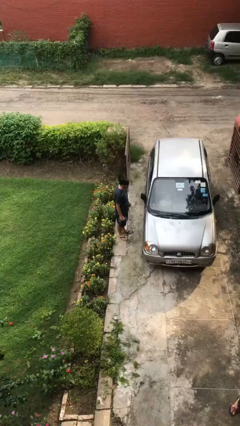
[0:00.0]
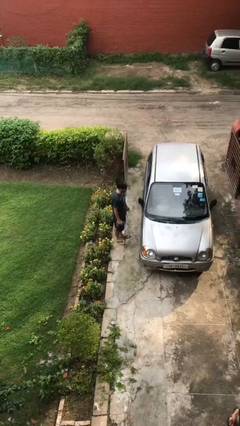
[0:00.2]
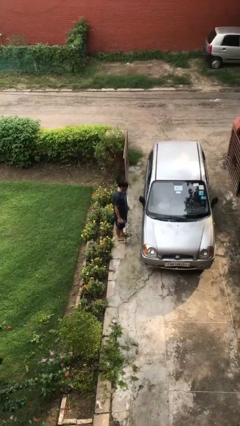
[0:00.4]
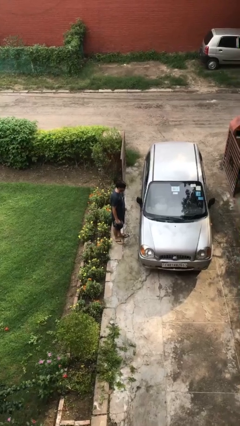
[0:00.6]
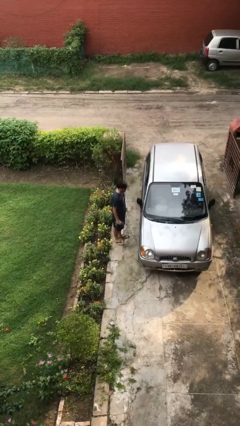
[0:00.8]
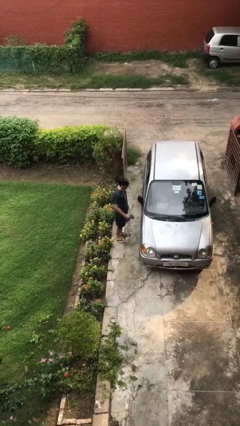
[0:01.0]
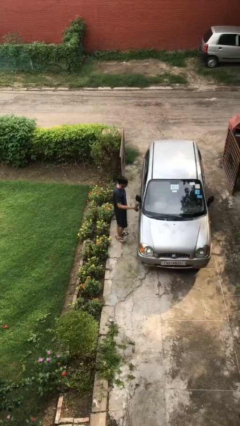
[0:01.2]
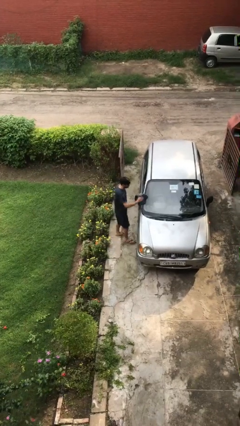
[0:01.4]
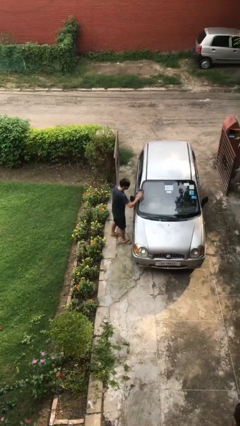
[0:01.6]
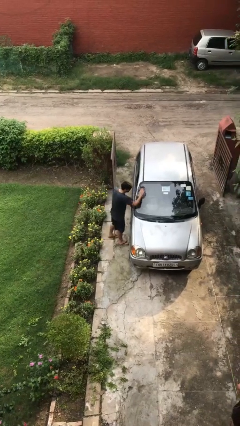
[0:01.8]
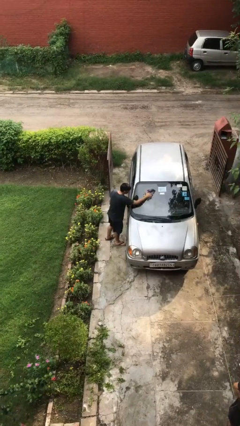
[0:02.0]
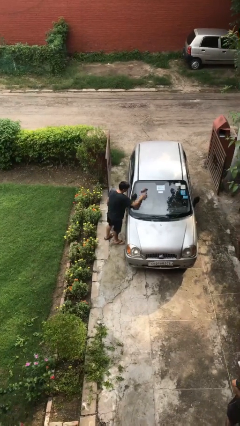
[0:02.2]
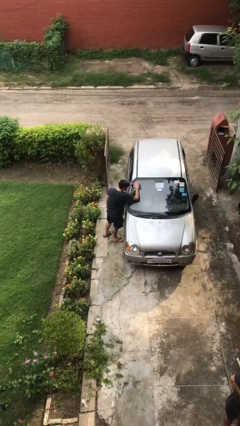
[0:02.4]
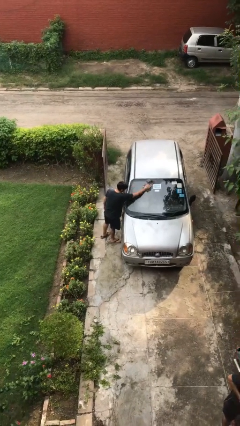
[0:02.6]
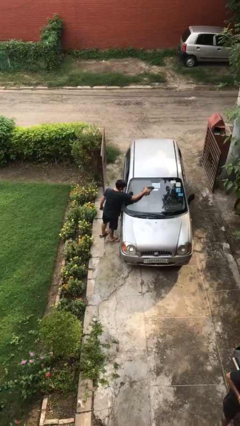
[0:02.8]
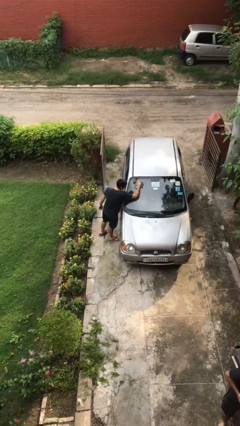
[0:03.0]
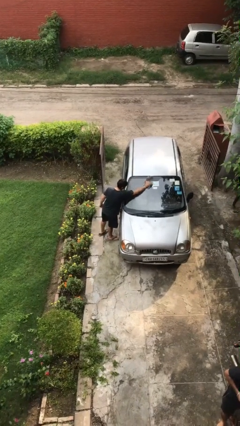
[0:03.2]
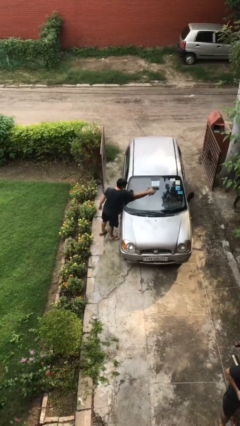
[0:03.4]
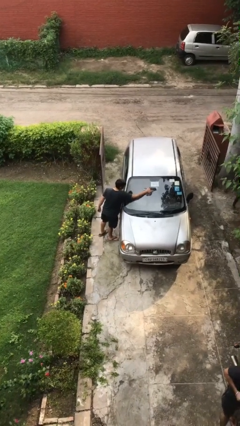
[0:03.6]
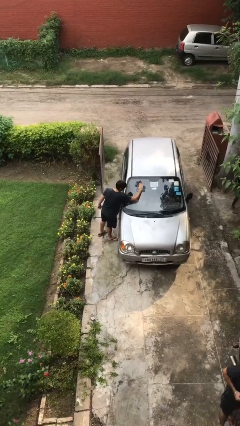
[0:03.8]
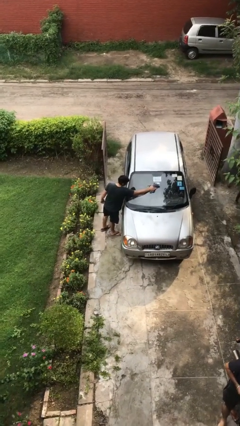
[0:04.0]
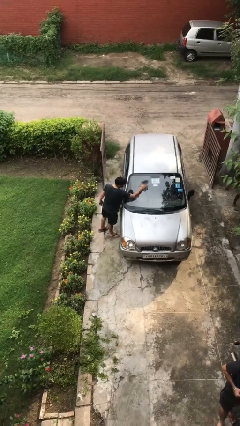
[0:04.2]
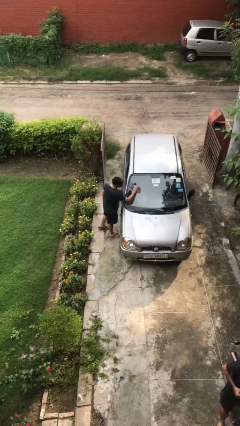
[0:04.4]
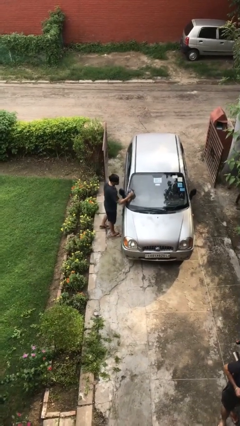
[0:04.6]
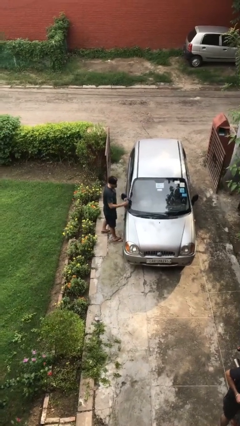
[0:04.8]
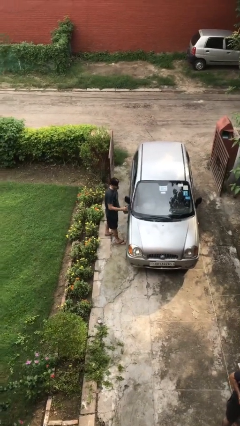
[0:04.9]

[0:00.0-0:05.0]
person polishes car with rag

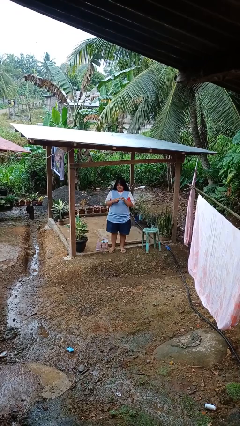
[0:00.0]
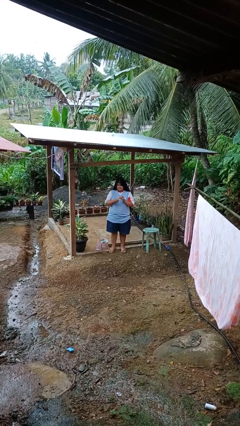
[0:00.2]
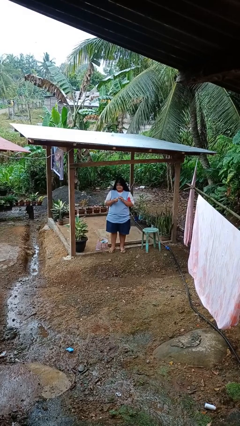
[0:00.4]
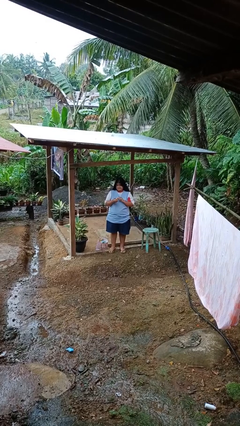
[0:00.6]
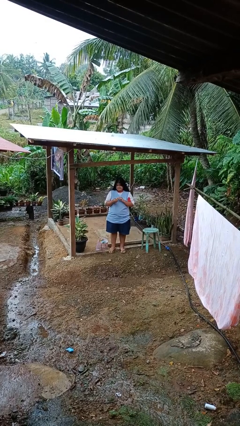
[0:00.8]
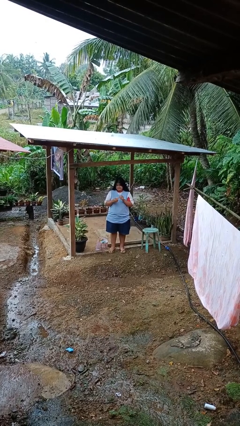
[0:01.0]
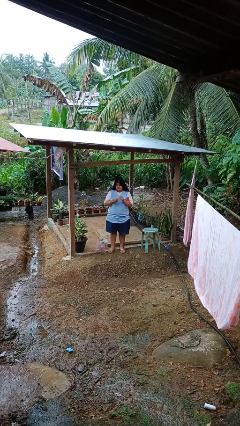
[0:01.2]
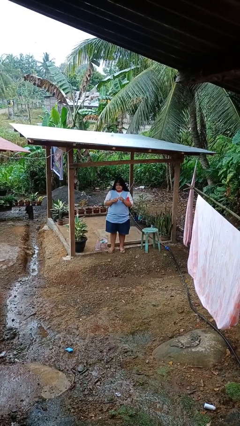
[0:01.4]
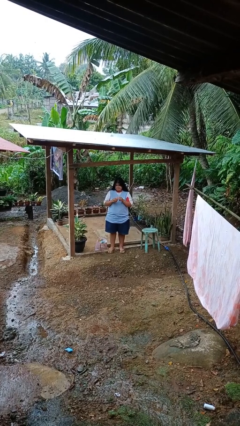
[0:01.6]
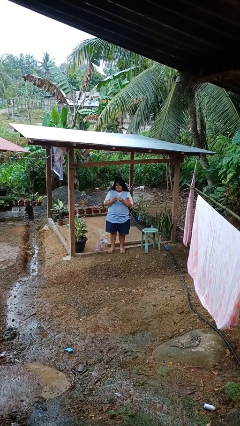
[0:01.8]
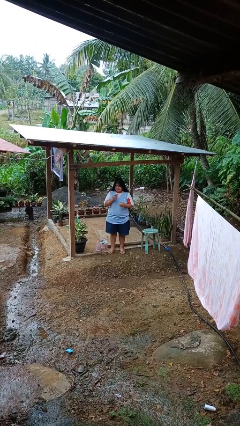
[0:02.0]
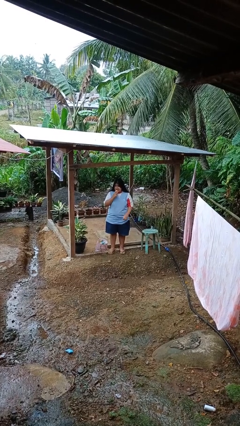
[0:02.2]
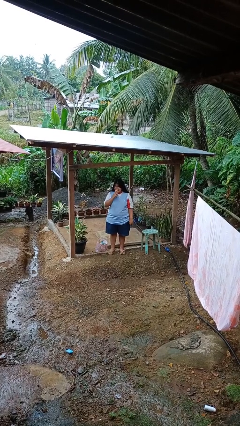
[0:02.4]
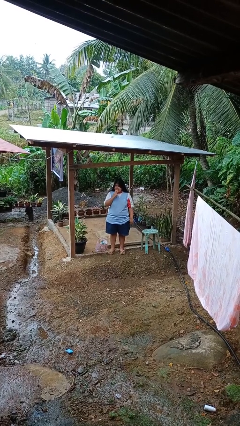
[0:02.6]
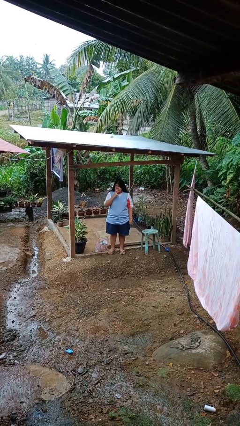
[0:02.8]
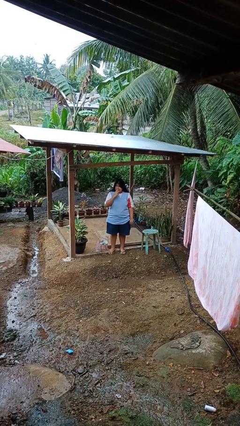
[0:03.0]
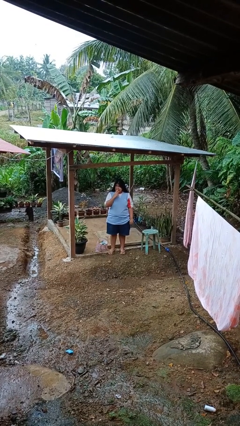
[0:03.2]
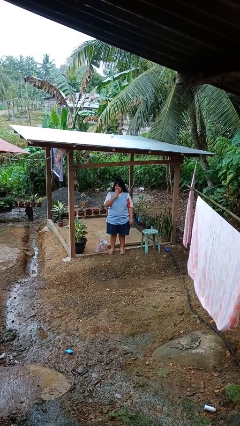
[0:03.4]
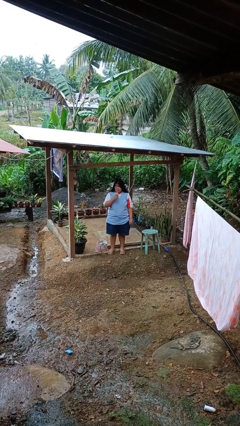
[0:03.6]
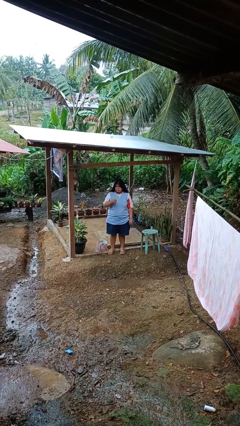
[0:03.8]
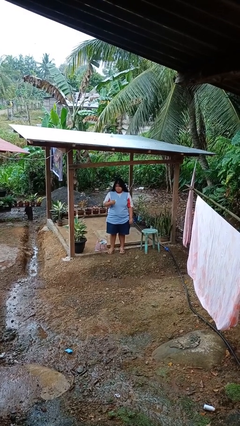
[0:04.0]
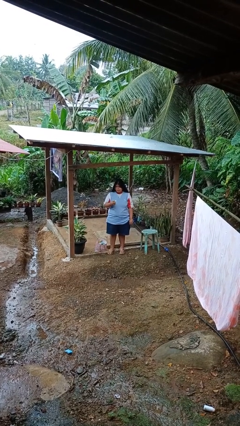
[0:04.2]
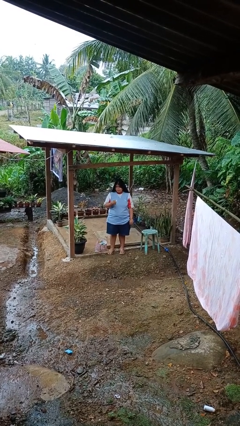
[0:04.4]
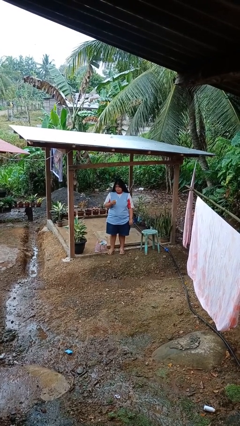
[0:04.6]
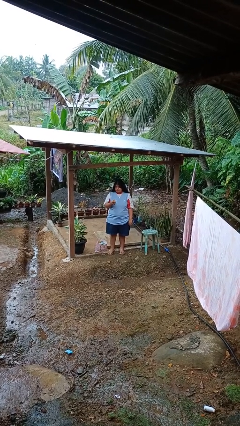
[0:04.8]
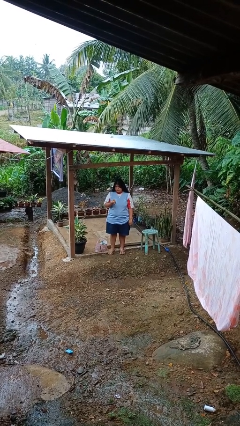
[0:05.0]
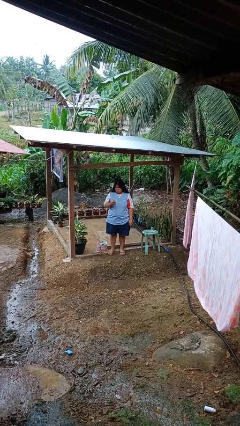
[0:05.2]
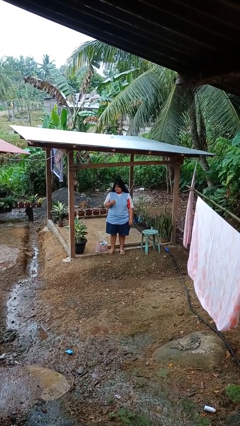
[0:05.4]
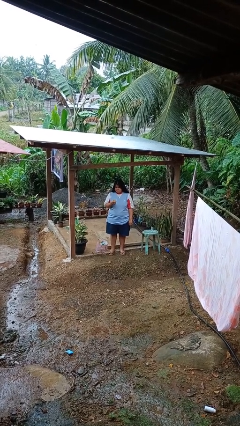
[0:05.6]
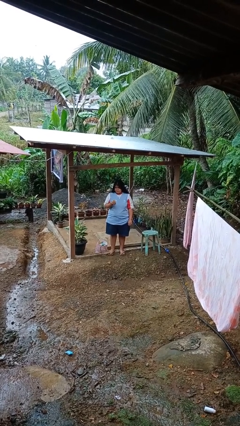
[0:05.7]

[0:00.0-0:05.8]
person eats banana

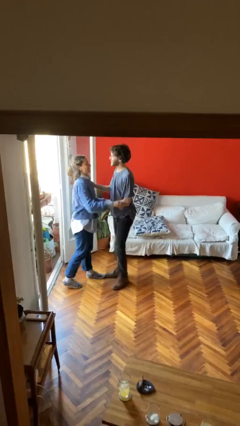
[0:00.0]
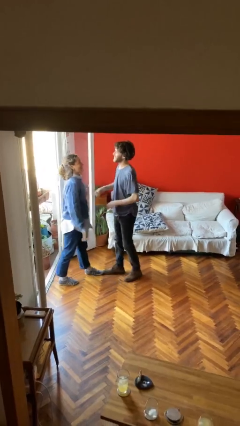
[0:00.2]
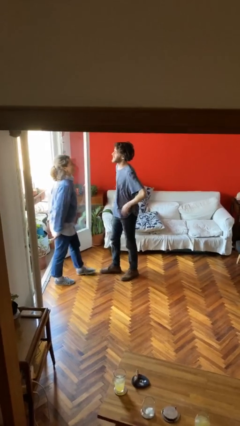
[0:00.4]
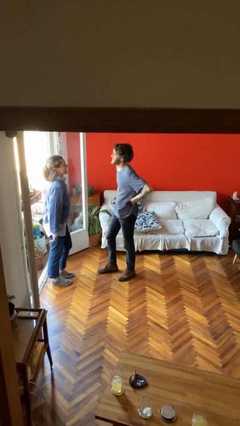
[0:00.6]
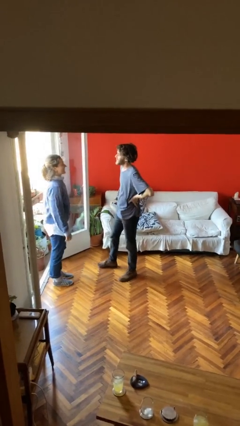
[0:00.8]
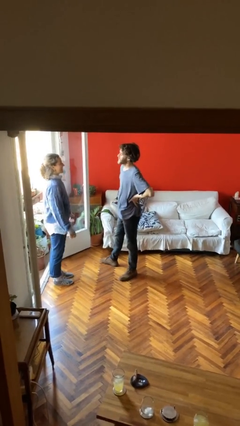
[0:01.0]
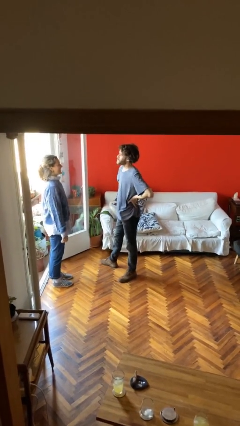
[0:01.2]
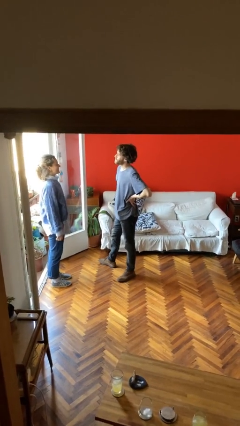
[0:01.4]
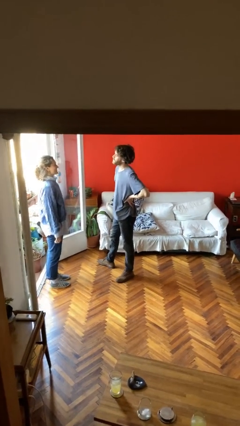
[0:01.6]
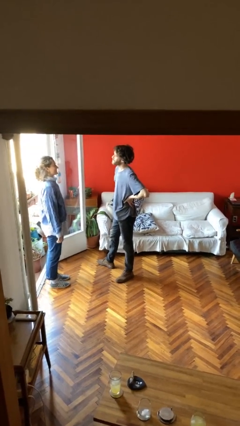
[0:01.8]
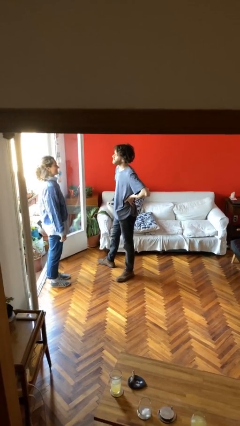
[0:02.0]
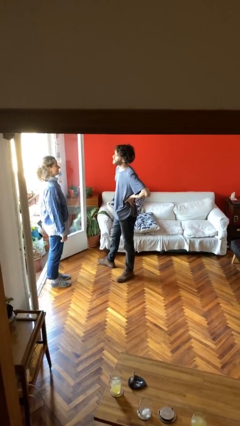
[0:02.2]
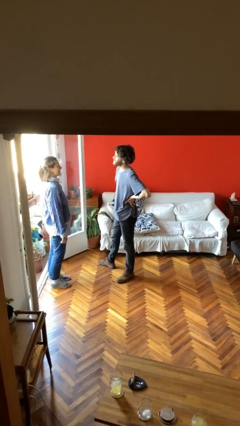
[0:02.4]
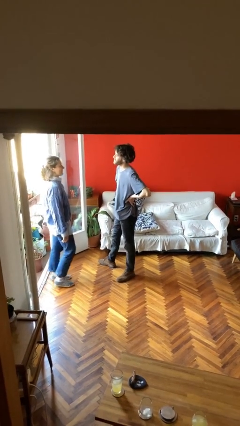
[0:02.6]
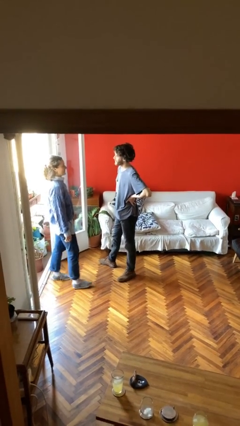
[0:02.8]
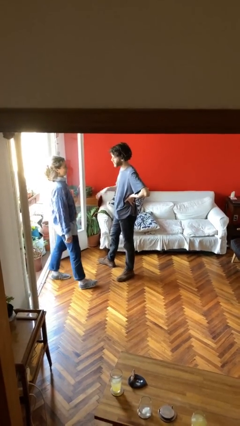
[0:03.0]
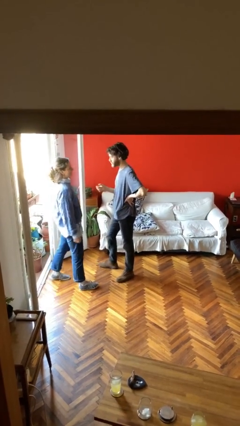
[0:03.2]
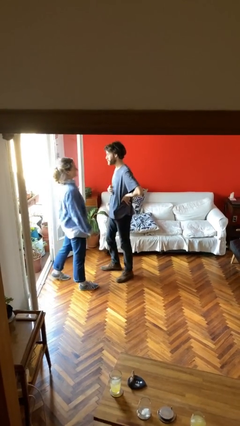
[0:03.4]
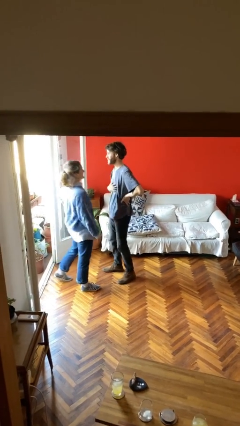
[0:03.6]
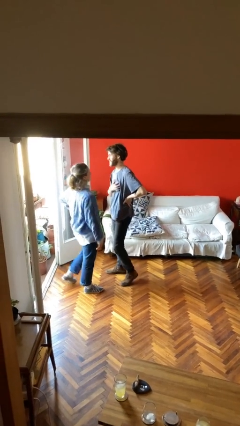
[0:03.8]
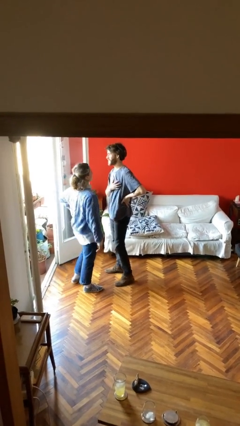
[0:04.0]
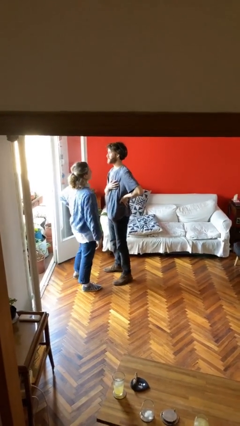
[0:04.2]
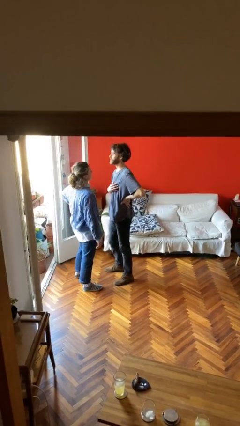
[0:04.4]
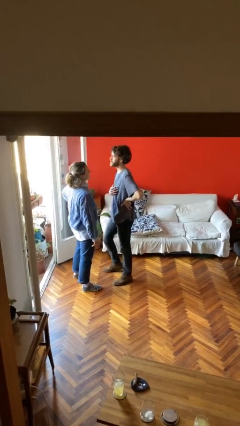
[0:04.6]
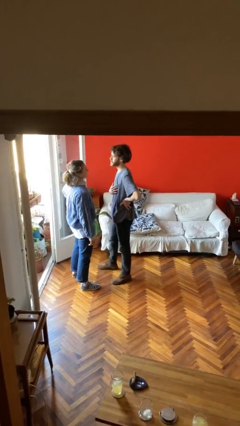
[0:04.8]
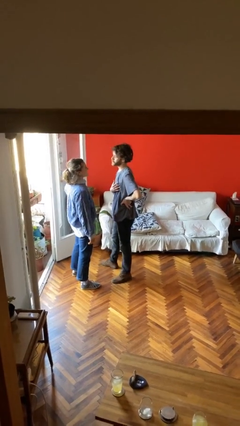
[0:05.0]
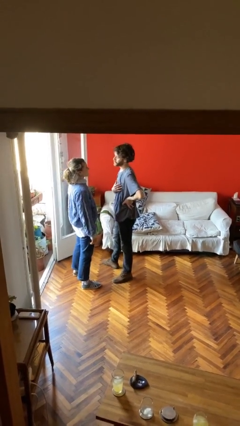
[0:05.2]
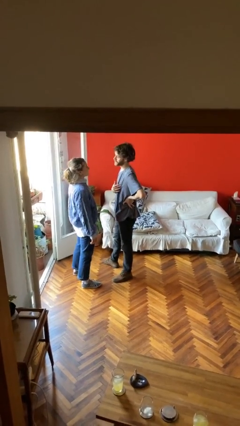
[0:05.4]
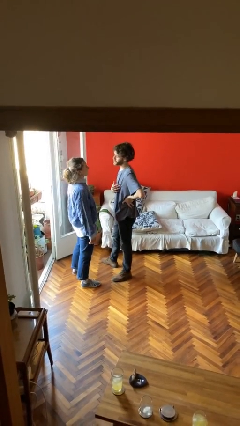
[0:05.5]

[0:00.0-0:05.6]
person talks to person

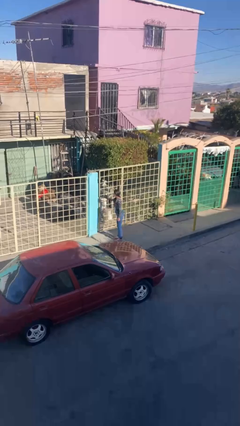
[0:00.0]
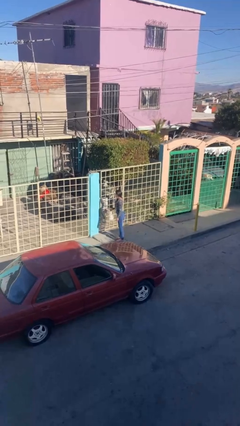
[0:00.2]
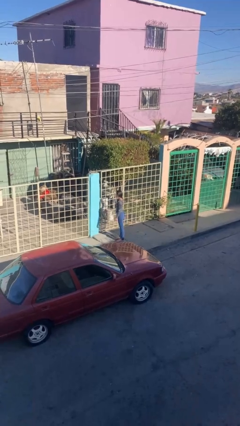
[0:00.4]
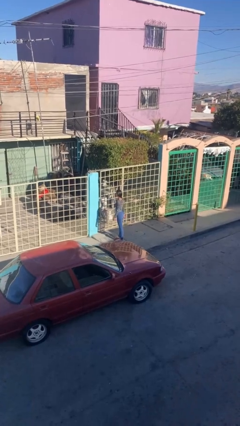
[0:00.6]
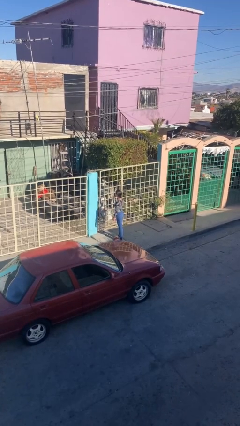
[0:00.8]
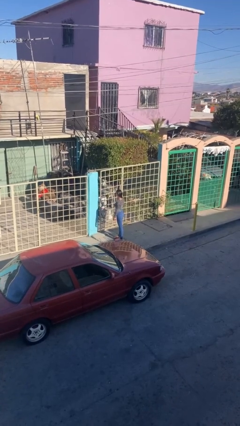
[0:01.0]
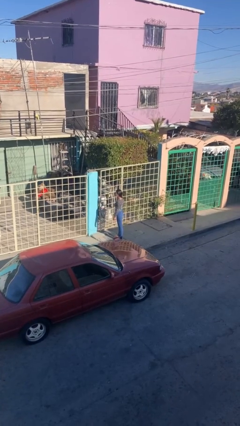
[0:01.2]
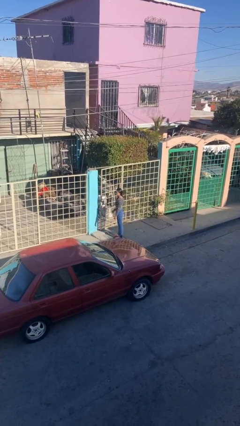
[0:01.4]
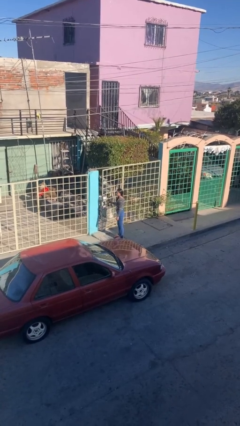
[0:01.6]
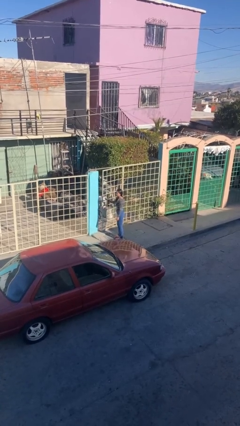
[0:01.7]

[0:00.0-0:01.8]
person closes facility door
